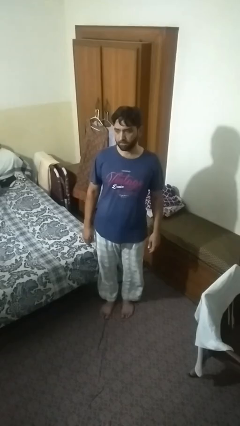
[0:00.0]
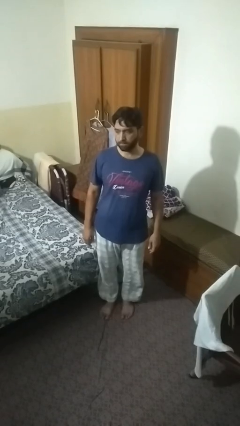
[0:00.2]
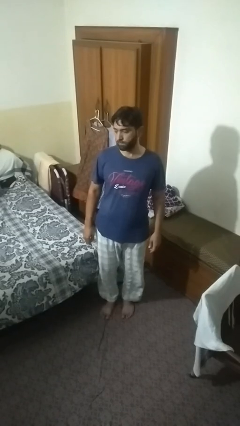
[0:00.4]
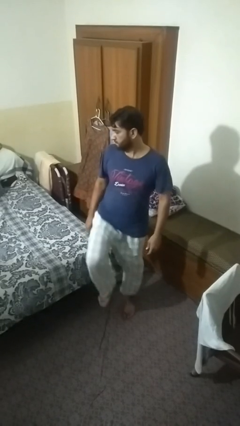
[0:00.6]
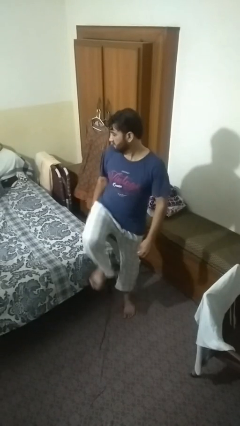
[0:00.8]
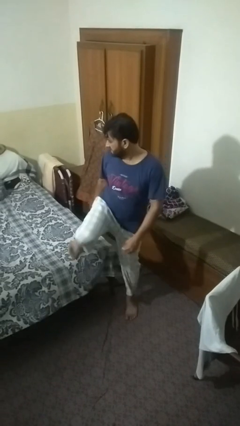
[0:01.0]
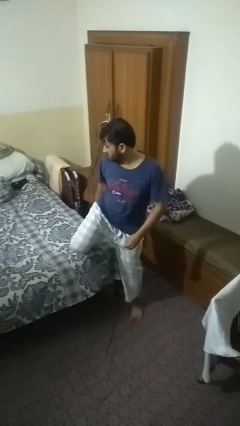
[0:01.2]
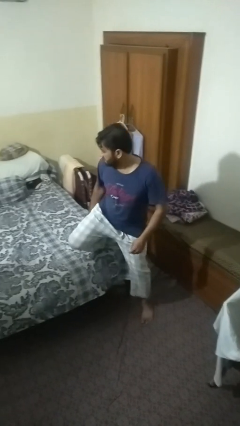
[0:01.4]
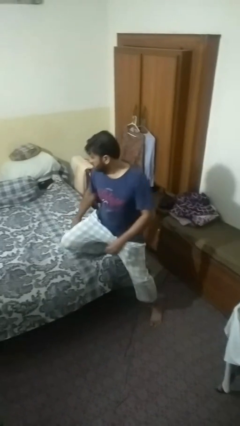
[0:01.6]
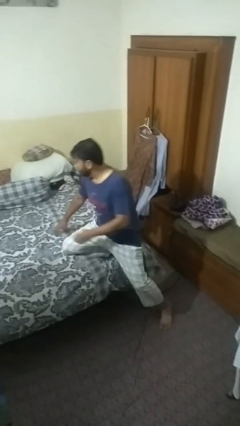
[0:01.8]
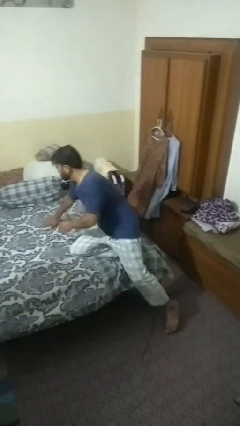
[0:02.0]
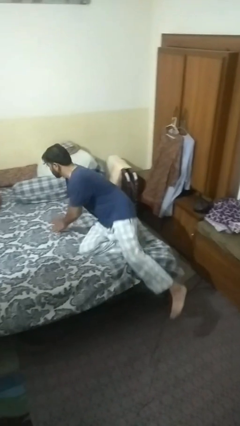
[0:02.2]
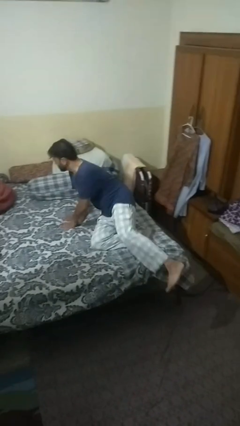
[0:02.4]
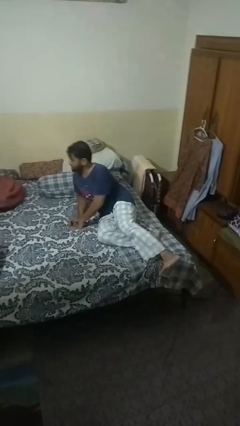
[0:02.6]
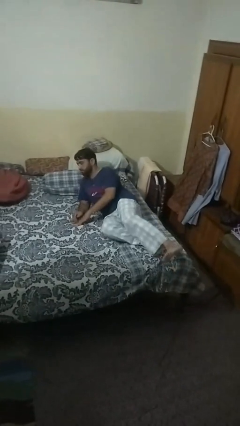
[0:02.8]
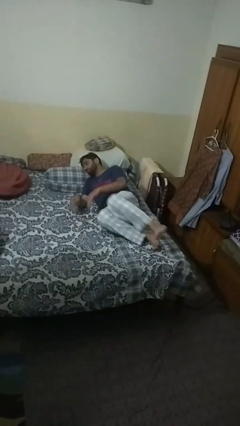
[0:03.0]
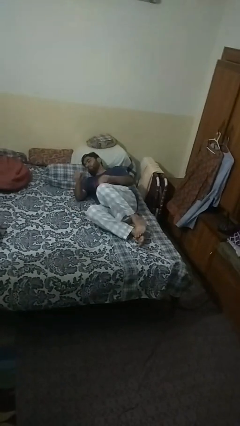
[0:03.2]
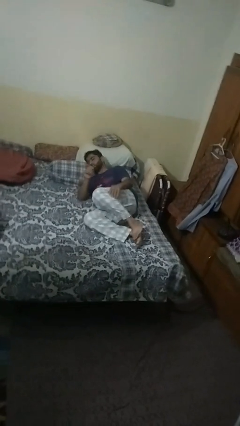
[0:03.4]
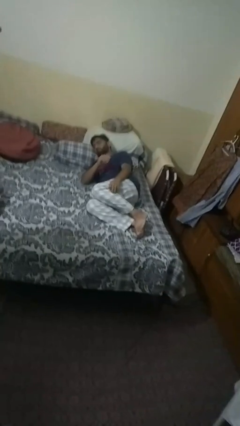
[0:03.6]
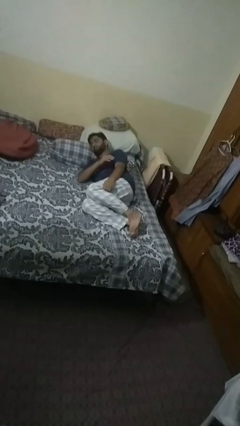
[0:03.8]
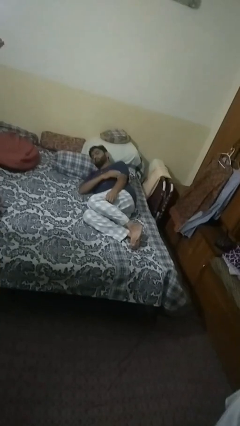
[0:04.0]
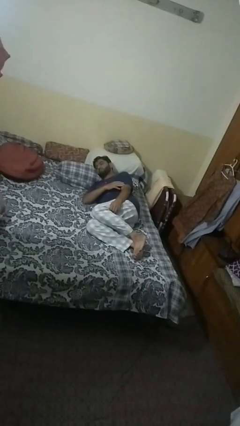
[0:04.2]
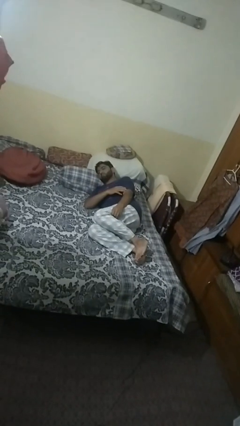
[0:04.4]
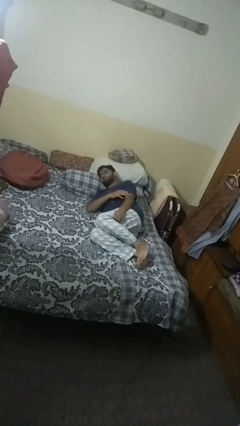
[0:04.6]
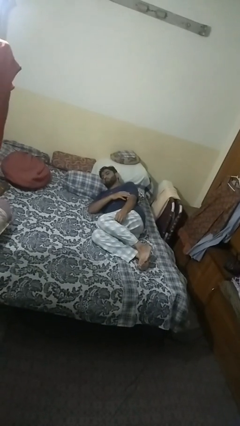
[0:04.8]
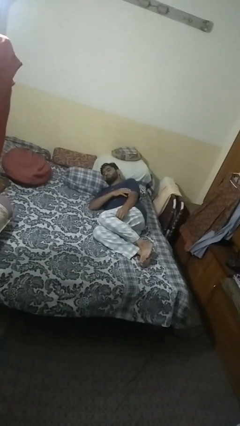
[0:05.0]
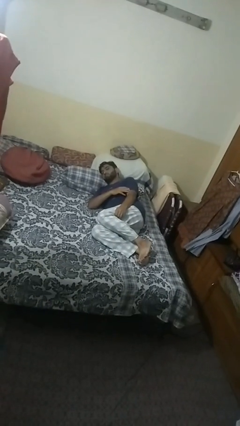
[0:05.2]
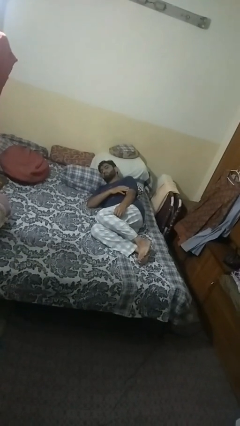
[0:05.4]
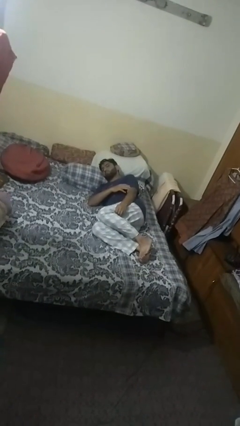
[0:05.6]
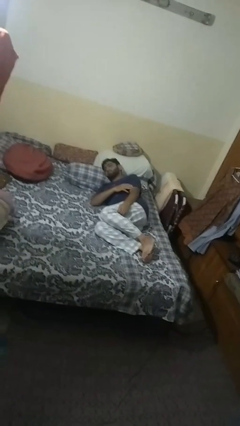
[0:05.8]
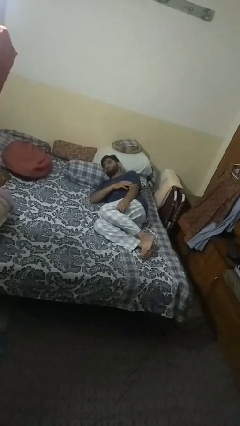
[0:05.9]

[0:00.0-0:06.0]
person lies down on bed

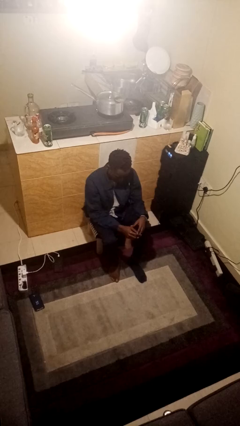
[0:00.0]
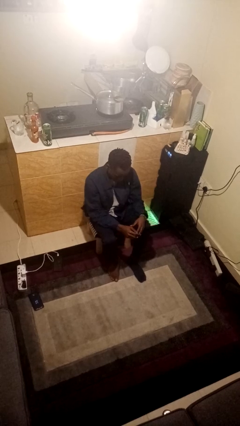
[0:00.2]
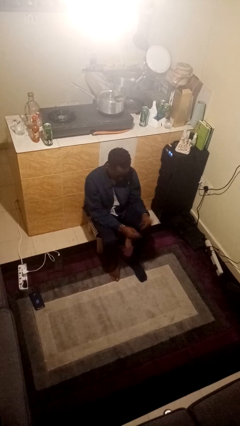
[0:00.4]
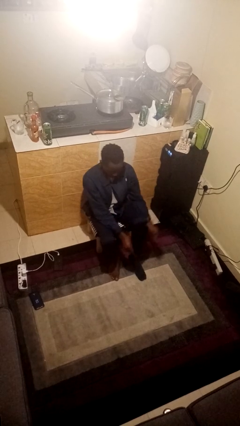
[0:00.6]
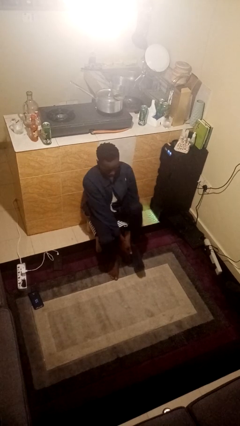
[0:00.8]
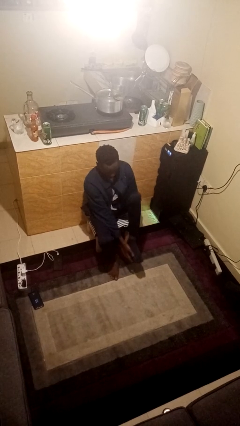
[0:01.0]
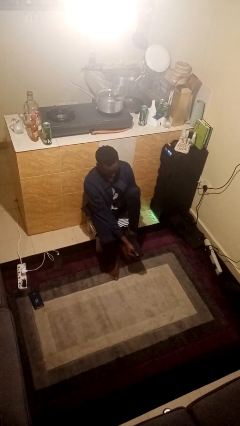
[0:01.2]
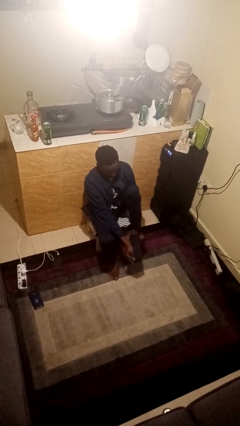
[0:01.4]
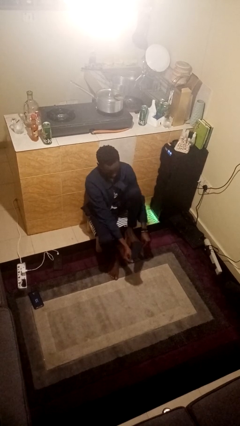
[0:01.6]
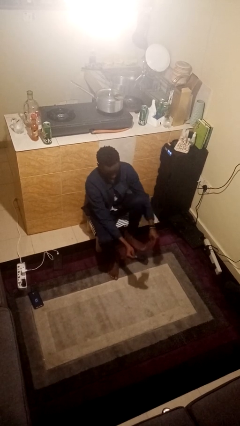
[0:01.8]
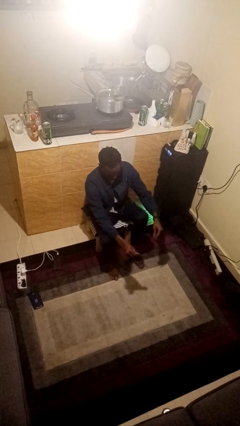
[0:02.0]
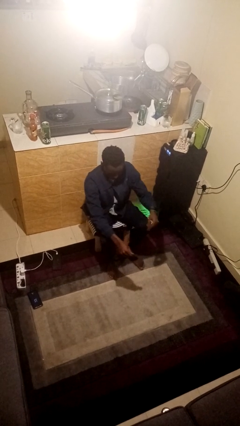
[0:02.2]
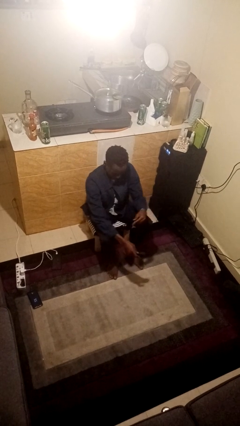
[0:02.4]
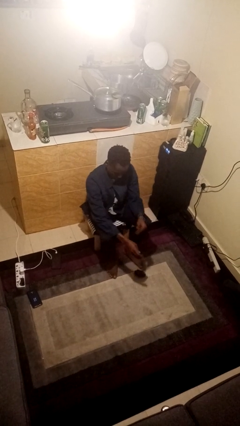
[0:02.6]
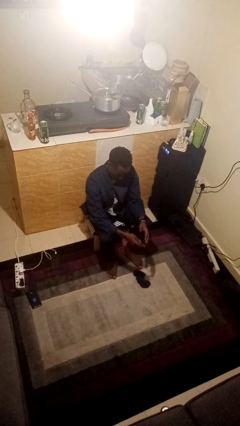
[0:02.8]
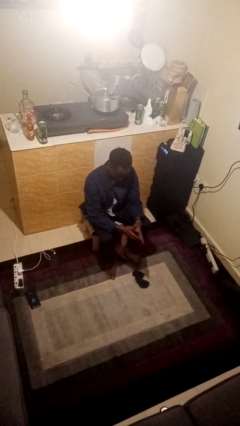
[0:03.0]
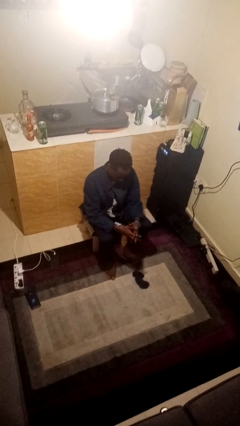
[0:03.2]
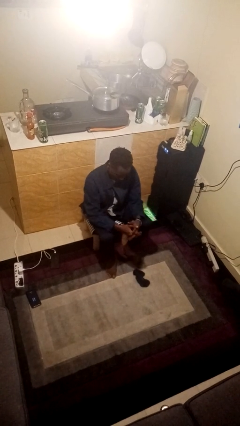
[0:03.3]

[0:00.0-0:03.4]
person takes off socks

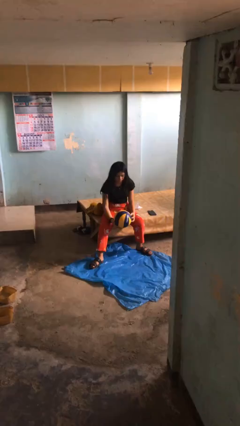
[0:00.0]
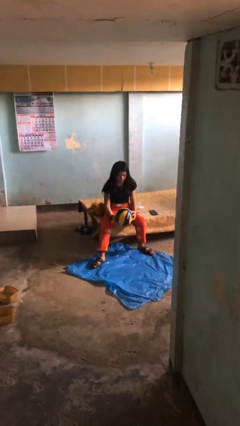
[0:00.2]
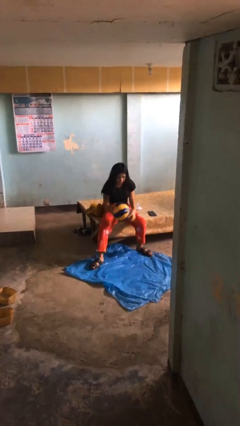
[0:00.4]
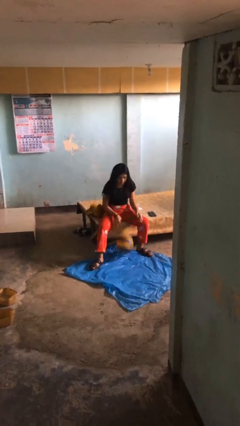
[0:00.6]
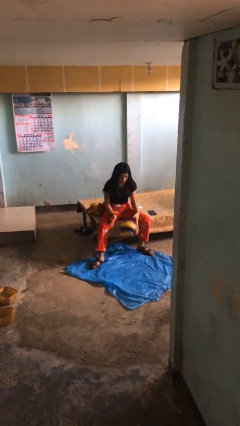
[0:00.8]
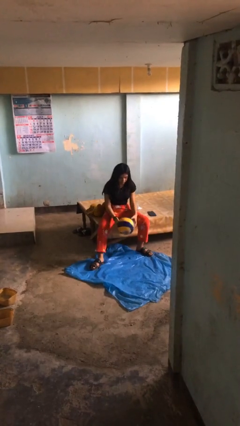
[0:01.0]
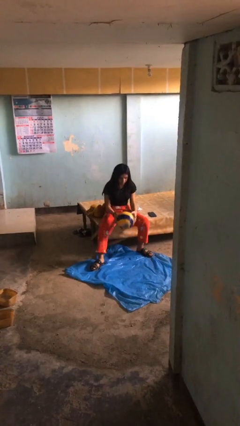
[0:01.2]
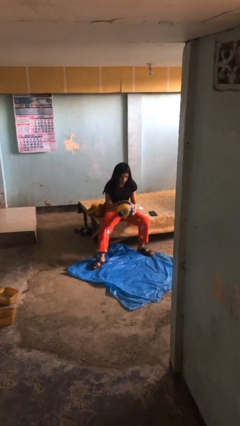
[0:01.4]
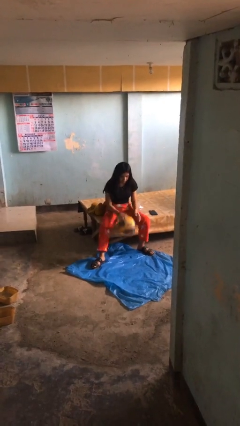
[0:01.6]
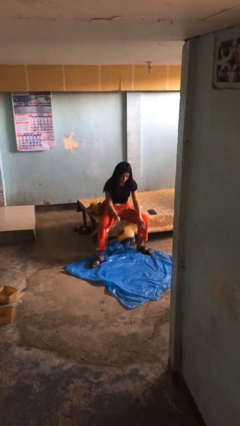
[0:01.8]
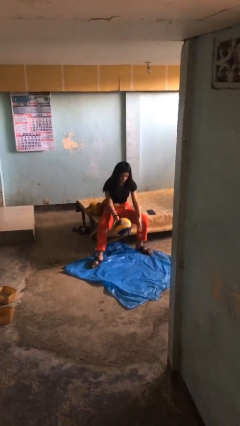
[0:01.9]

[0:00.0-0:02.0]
person bounces ball on floor

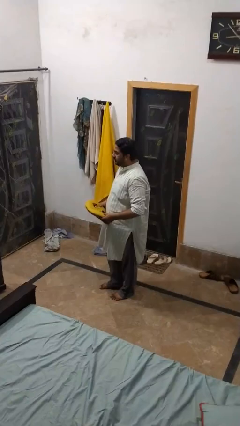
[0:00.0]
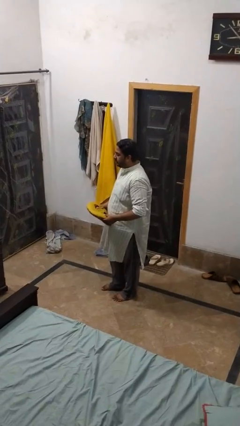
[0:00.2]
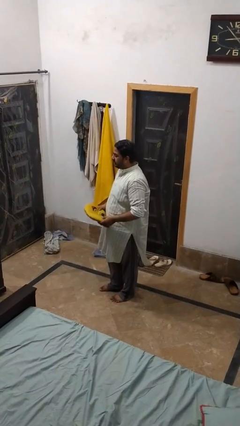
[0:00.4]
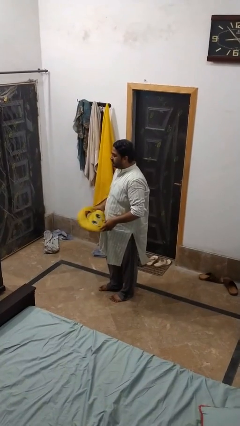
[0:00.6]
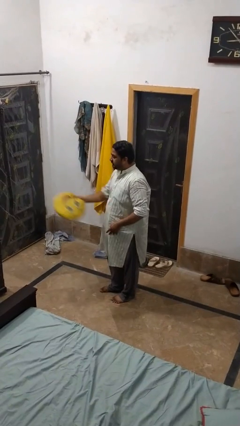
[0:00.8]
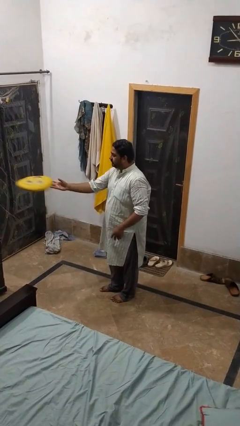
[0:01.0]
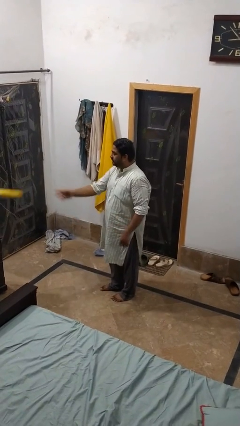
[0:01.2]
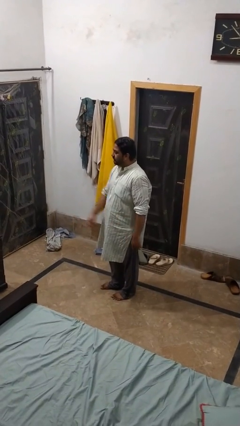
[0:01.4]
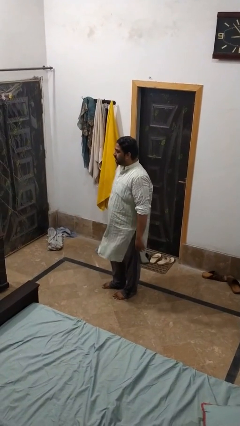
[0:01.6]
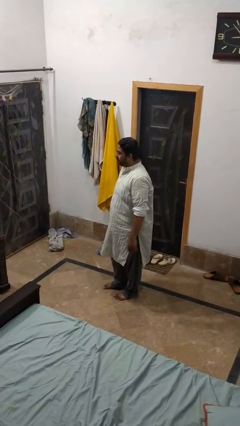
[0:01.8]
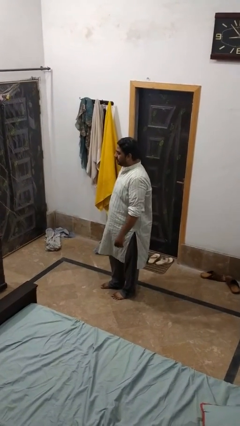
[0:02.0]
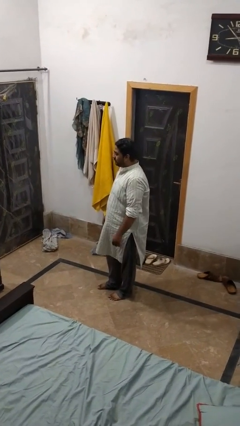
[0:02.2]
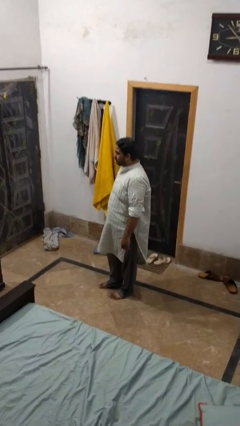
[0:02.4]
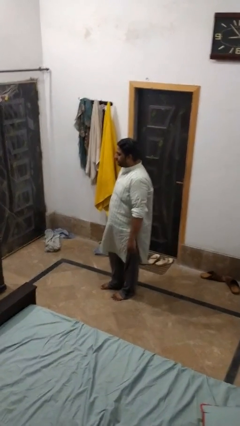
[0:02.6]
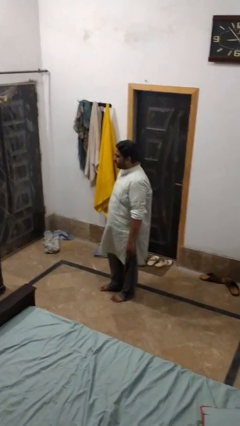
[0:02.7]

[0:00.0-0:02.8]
person throws object on table

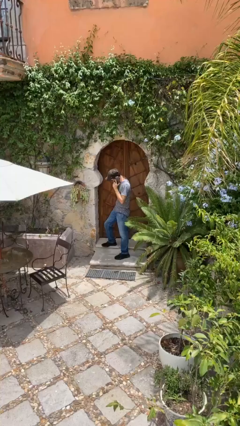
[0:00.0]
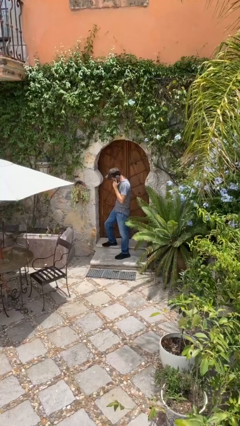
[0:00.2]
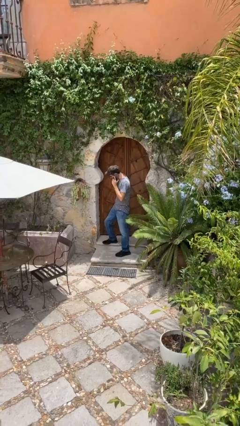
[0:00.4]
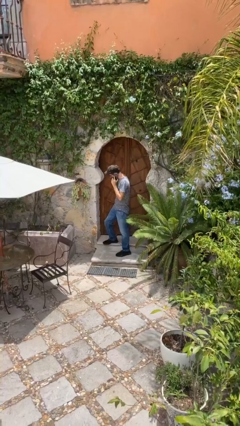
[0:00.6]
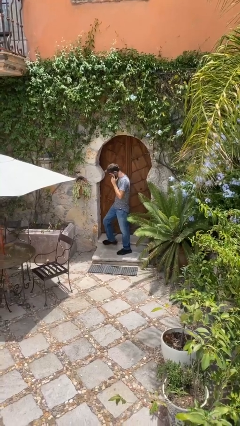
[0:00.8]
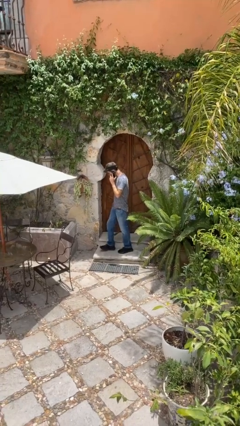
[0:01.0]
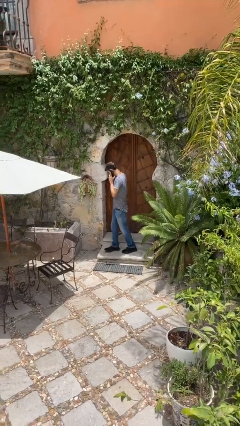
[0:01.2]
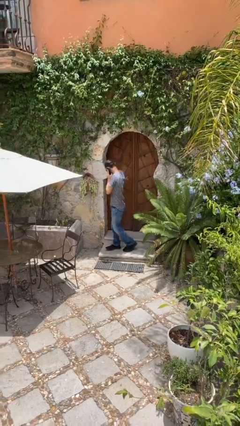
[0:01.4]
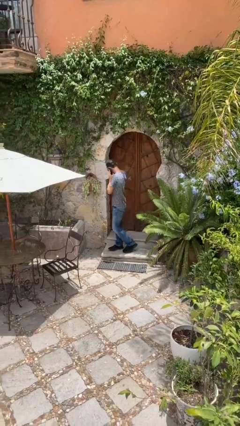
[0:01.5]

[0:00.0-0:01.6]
person closes facility door

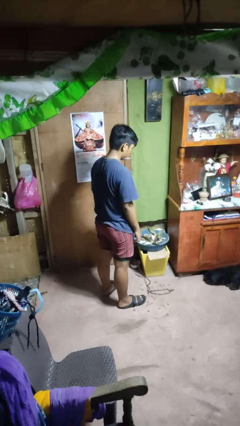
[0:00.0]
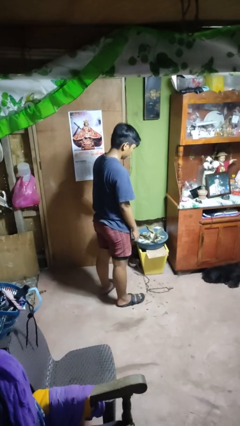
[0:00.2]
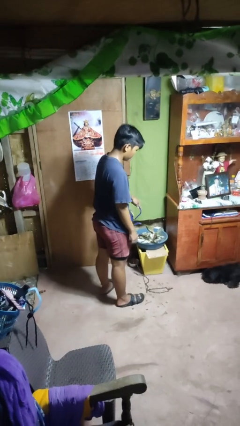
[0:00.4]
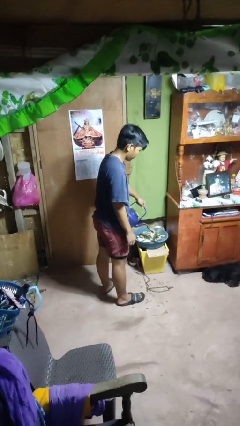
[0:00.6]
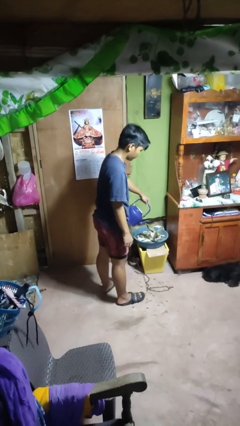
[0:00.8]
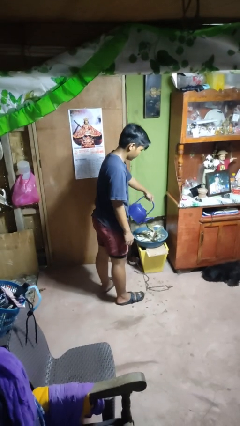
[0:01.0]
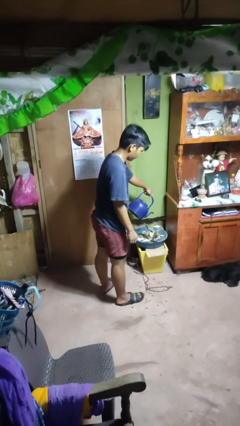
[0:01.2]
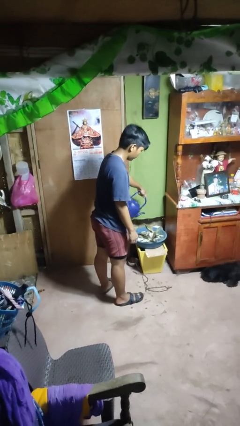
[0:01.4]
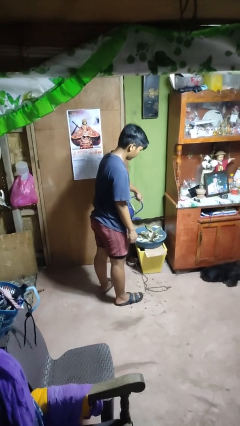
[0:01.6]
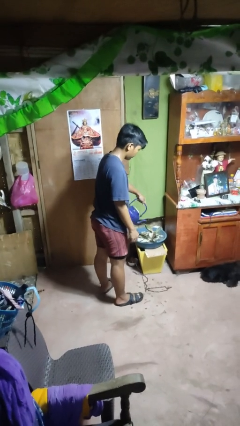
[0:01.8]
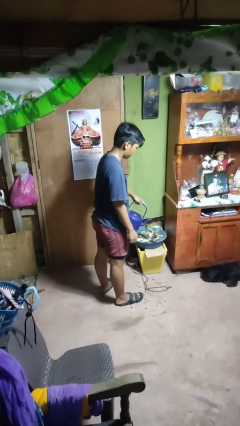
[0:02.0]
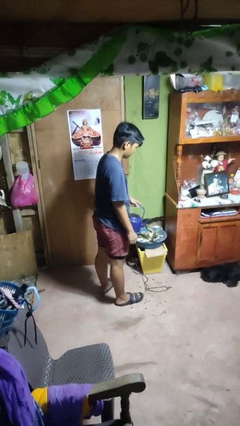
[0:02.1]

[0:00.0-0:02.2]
person waters houseplant
